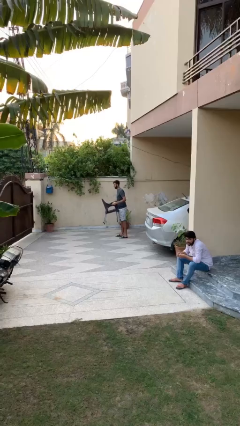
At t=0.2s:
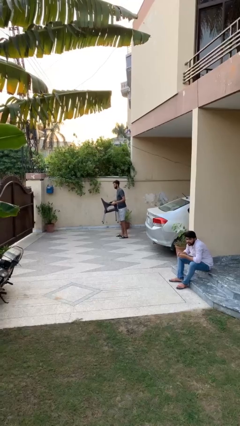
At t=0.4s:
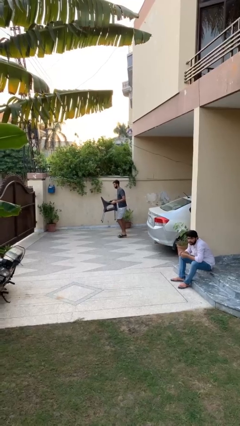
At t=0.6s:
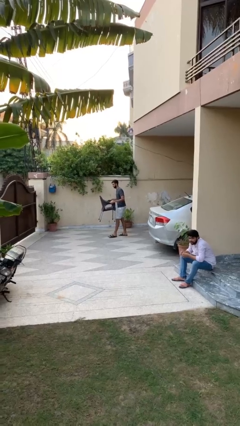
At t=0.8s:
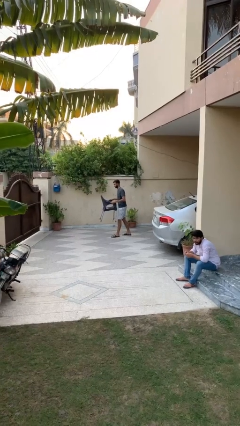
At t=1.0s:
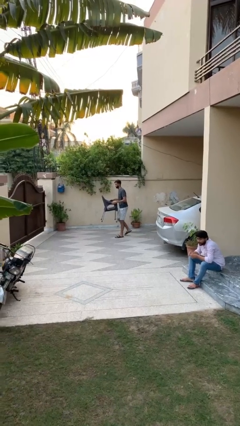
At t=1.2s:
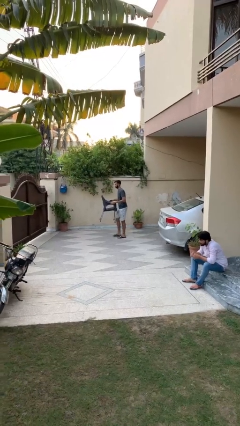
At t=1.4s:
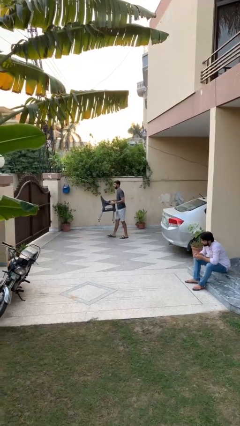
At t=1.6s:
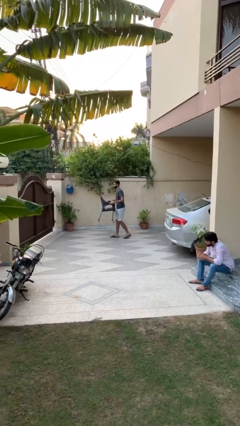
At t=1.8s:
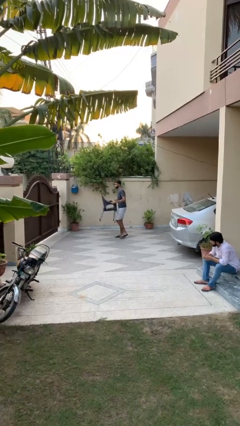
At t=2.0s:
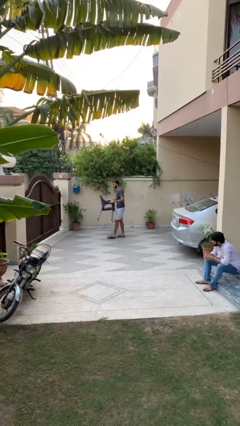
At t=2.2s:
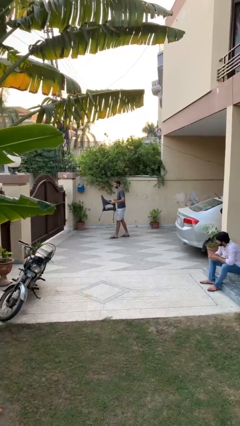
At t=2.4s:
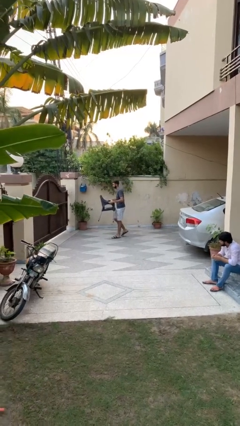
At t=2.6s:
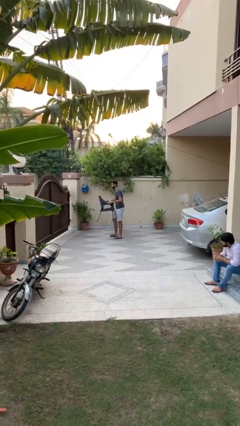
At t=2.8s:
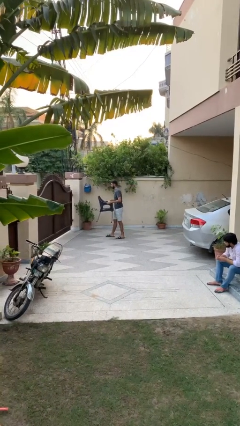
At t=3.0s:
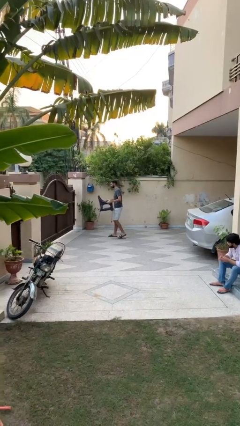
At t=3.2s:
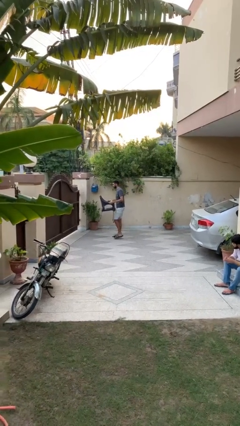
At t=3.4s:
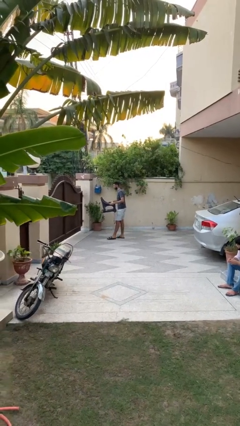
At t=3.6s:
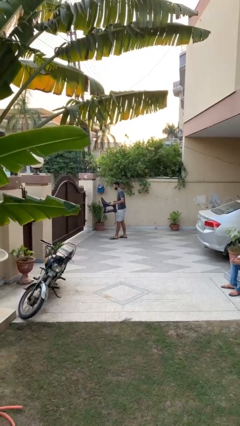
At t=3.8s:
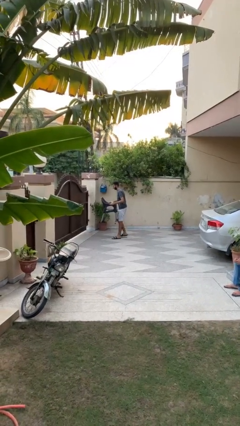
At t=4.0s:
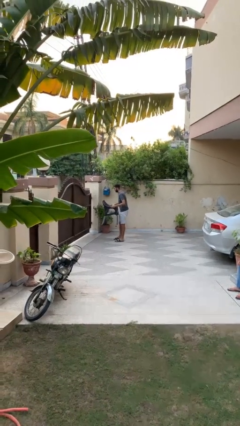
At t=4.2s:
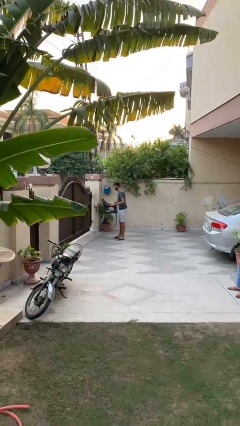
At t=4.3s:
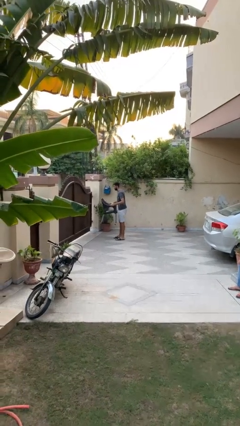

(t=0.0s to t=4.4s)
person carries heavy object

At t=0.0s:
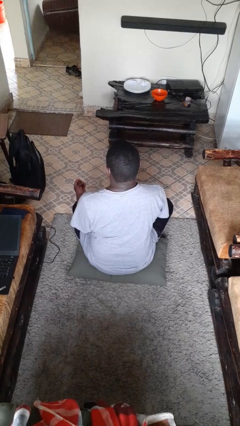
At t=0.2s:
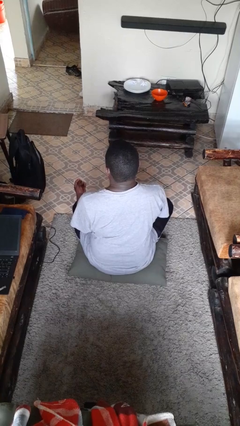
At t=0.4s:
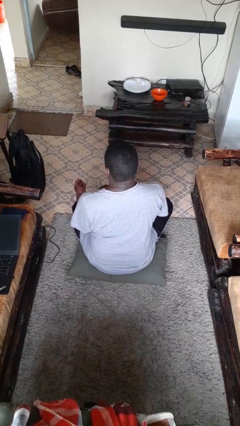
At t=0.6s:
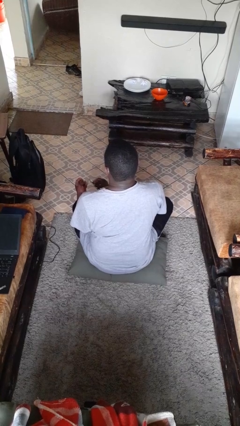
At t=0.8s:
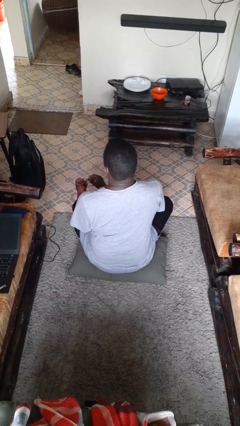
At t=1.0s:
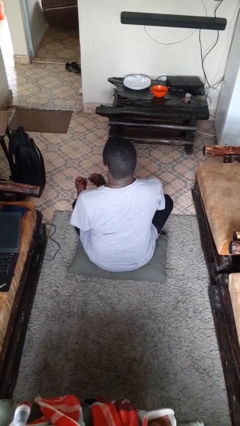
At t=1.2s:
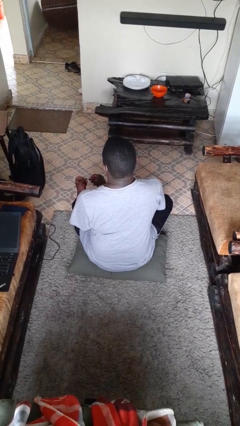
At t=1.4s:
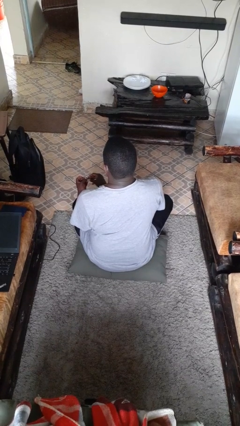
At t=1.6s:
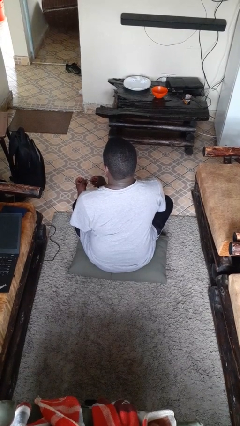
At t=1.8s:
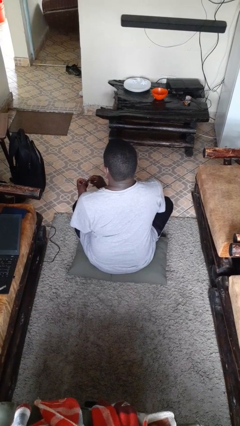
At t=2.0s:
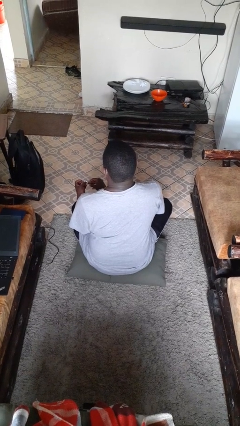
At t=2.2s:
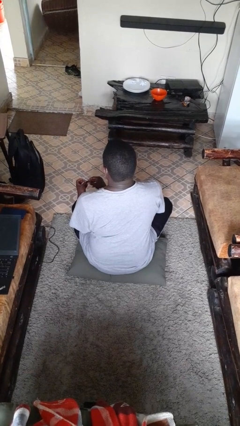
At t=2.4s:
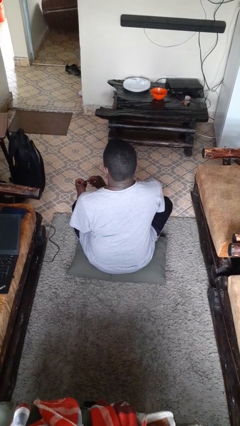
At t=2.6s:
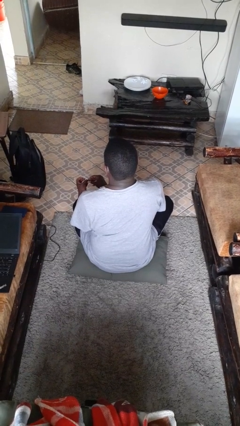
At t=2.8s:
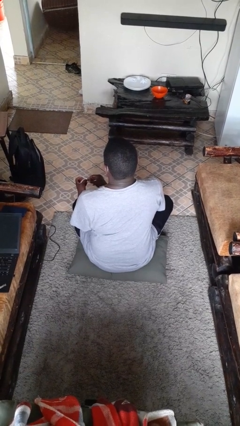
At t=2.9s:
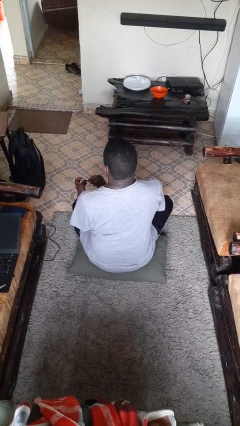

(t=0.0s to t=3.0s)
person files fingernails

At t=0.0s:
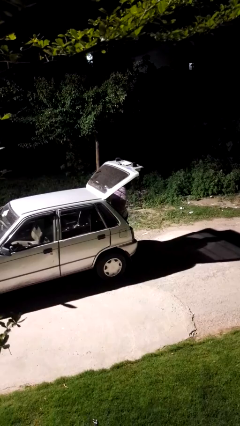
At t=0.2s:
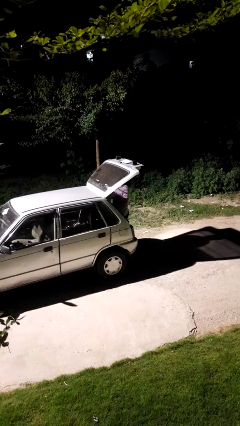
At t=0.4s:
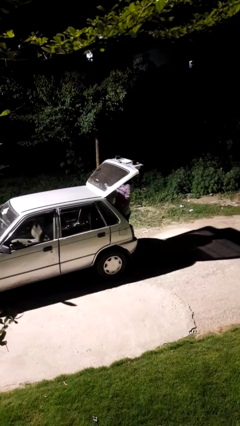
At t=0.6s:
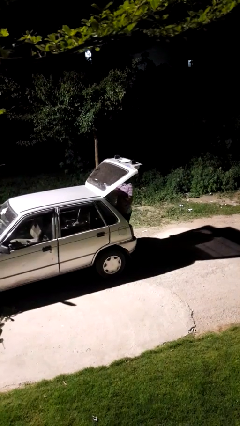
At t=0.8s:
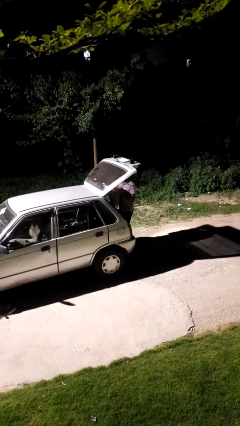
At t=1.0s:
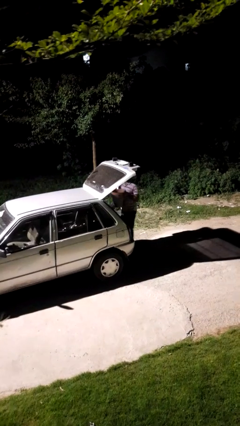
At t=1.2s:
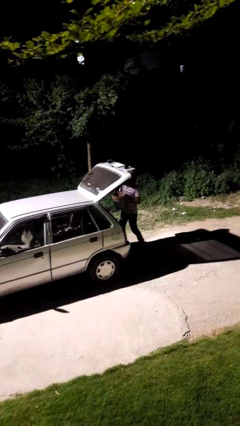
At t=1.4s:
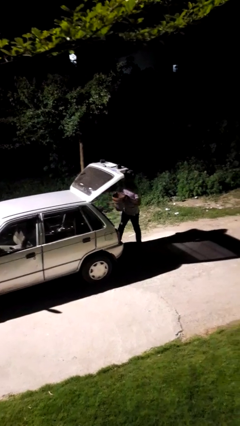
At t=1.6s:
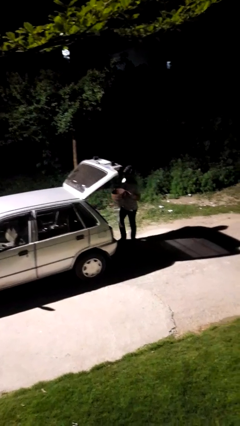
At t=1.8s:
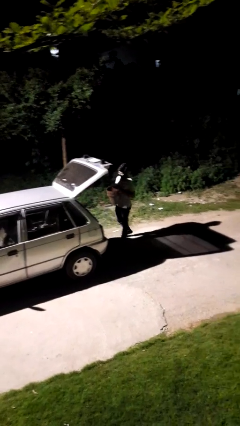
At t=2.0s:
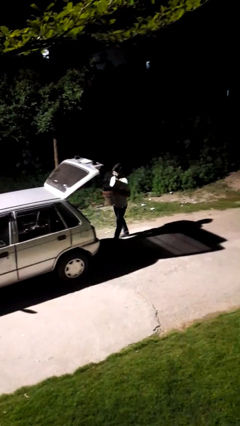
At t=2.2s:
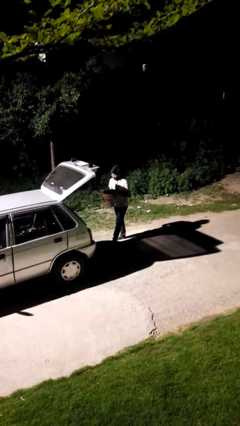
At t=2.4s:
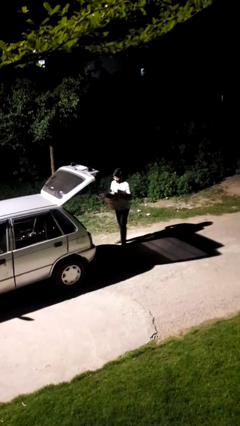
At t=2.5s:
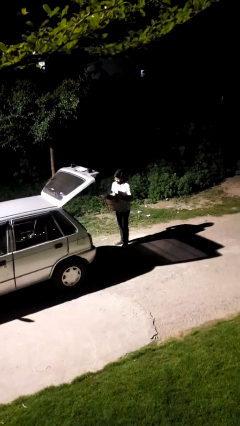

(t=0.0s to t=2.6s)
person unloads car

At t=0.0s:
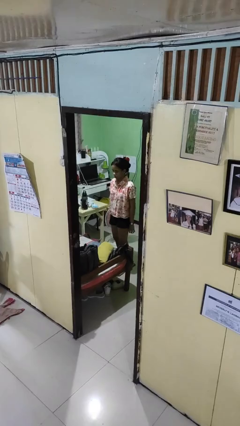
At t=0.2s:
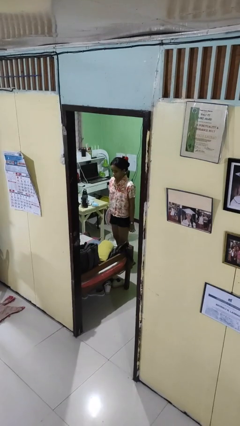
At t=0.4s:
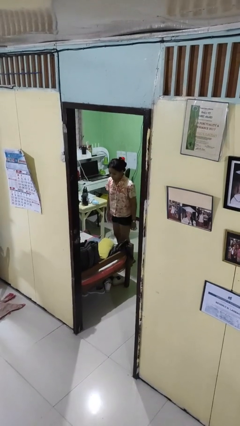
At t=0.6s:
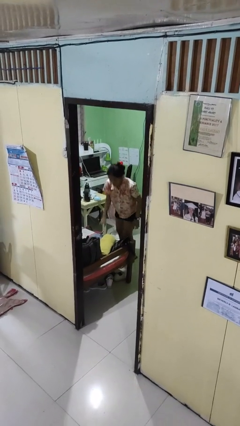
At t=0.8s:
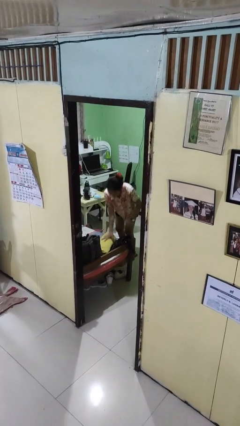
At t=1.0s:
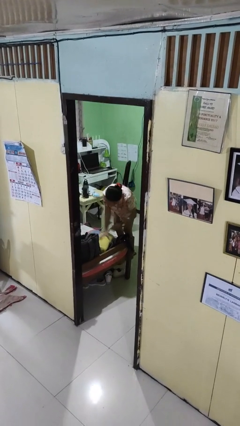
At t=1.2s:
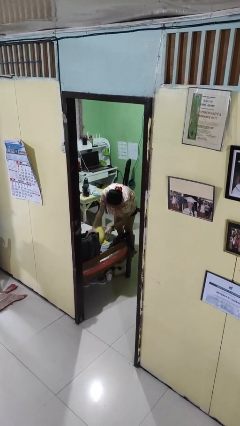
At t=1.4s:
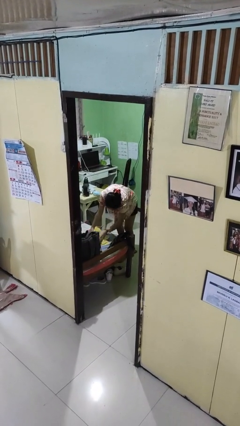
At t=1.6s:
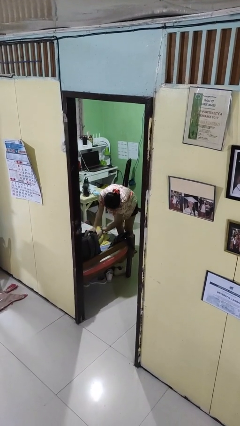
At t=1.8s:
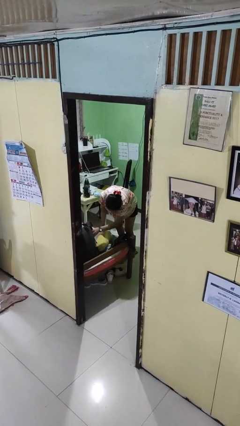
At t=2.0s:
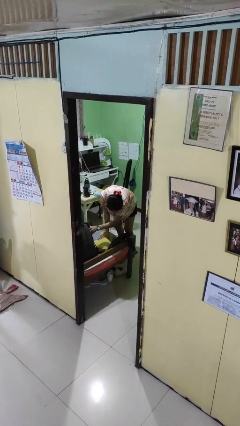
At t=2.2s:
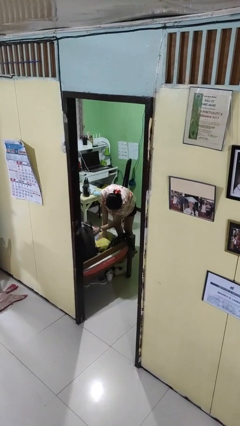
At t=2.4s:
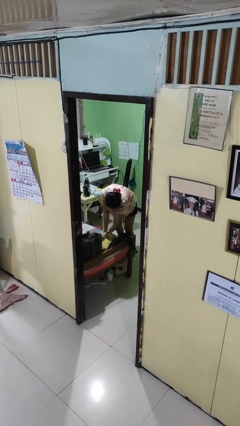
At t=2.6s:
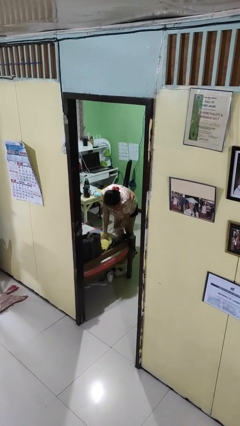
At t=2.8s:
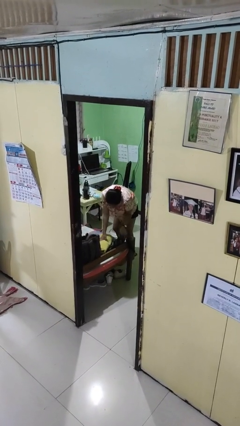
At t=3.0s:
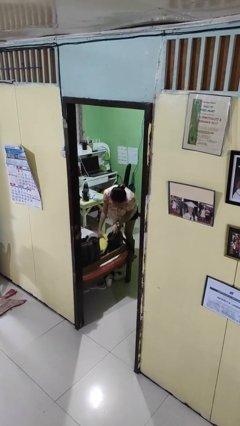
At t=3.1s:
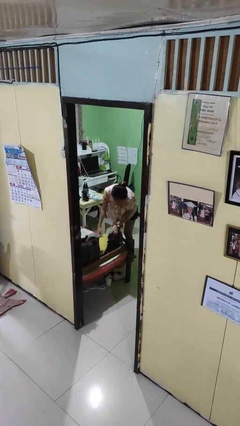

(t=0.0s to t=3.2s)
person searches under bed

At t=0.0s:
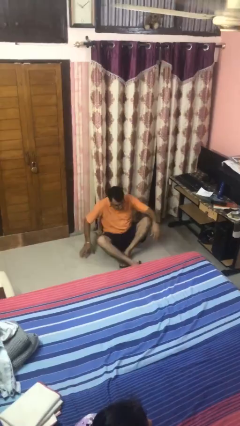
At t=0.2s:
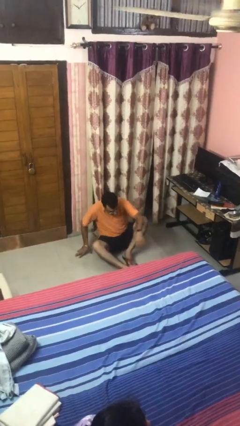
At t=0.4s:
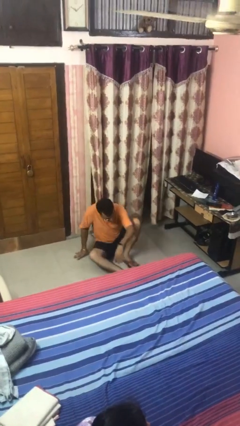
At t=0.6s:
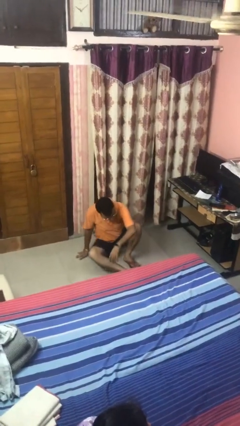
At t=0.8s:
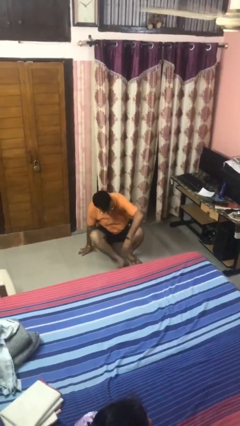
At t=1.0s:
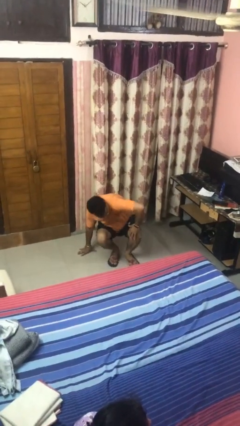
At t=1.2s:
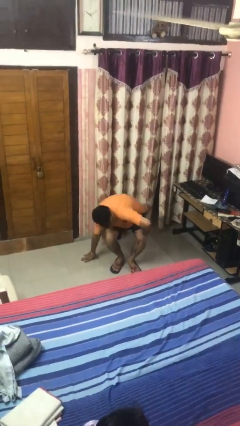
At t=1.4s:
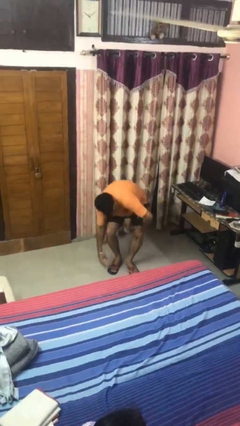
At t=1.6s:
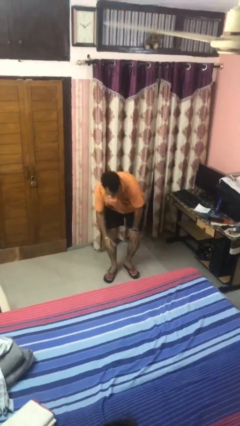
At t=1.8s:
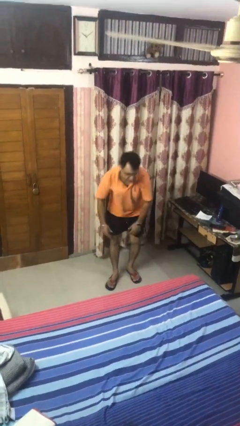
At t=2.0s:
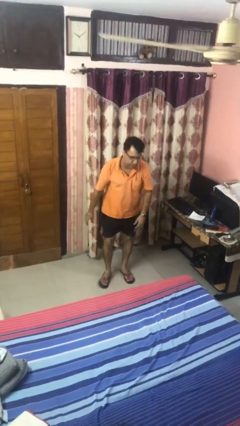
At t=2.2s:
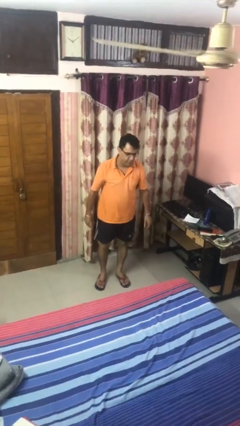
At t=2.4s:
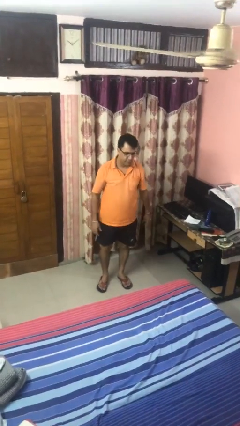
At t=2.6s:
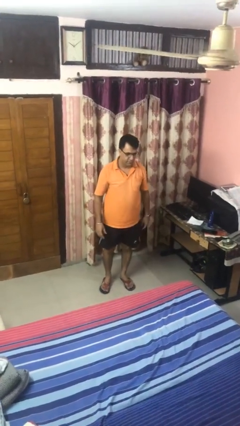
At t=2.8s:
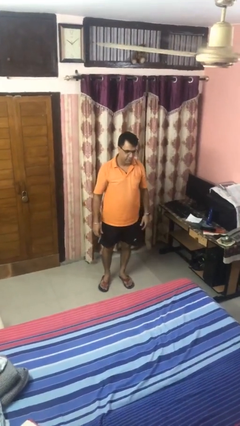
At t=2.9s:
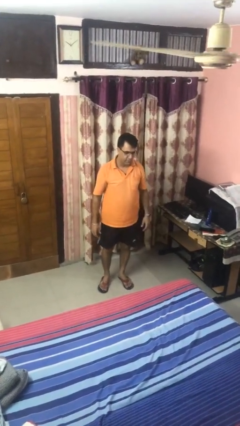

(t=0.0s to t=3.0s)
person stands up from floor

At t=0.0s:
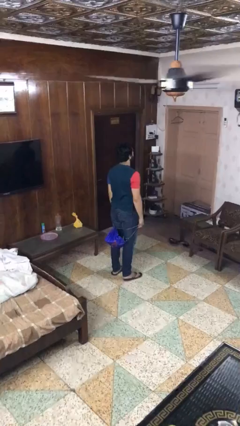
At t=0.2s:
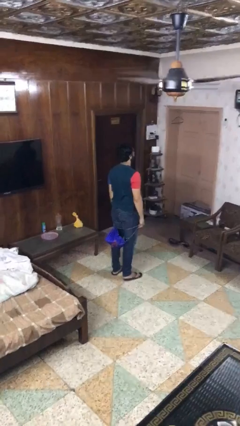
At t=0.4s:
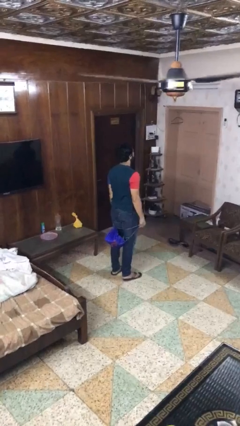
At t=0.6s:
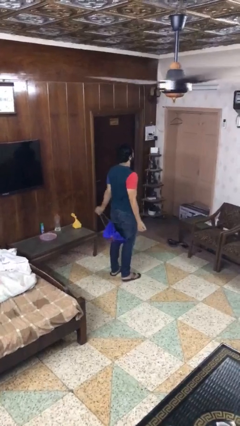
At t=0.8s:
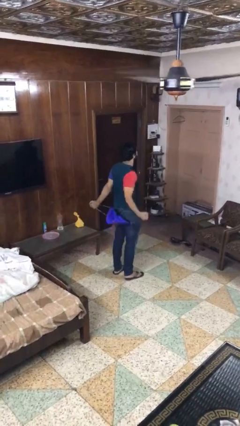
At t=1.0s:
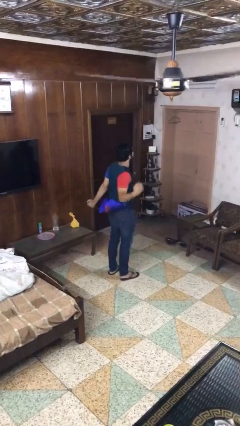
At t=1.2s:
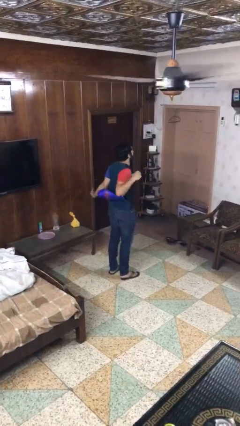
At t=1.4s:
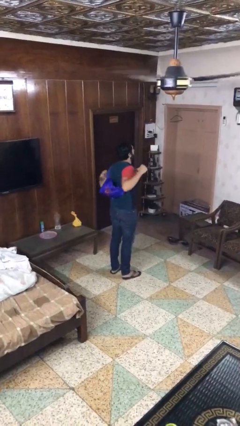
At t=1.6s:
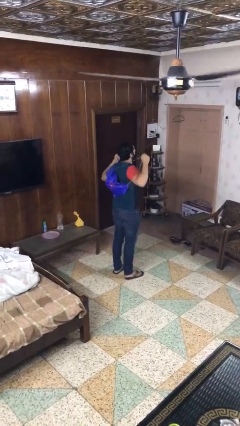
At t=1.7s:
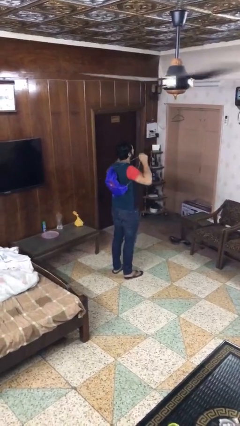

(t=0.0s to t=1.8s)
person puts on backpack
